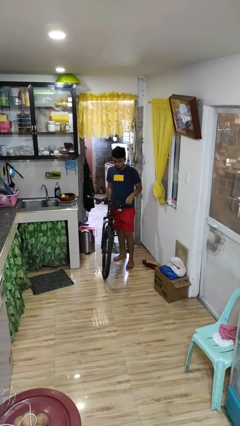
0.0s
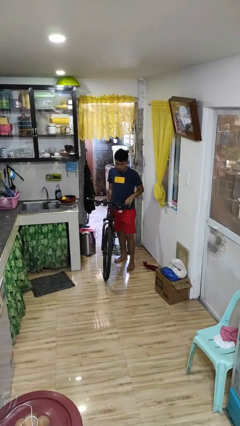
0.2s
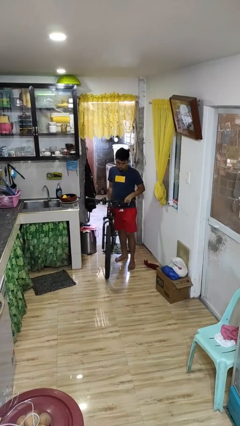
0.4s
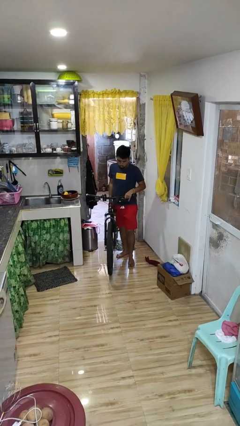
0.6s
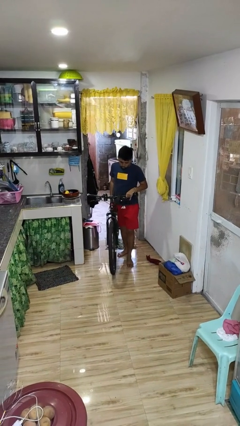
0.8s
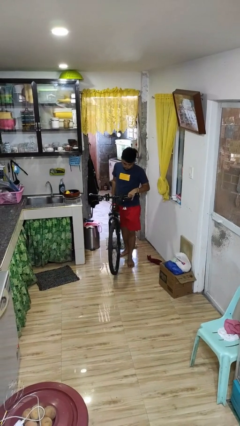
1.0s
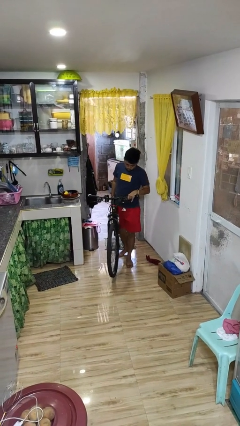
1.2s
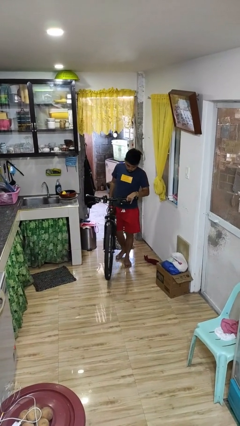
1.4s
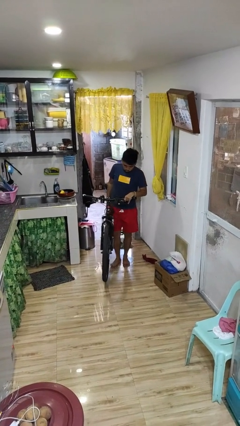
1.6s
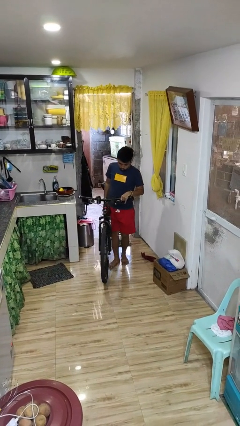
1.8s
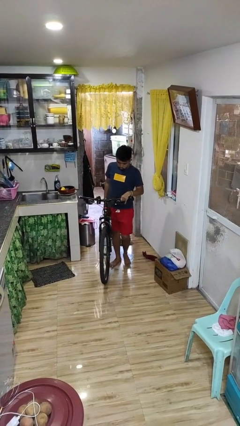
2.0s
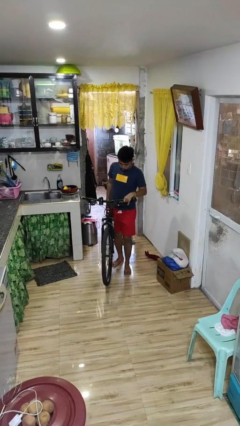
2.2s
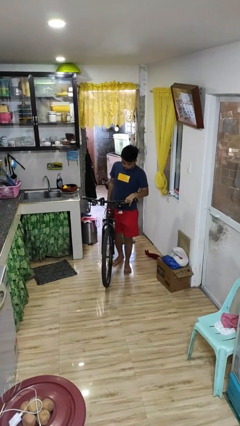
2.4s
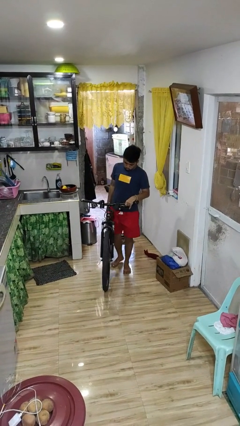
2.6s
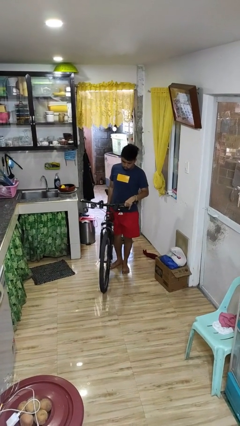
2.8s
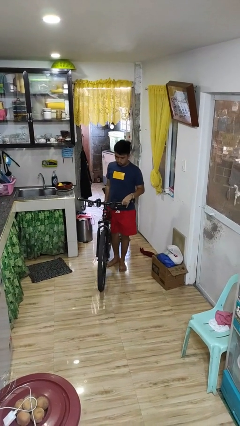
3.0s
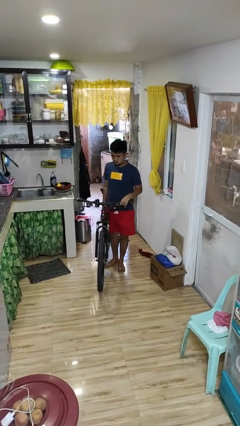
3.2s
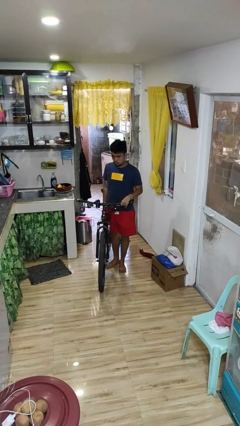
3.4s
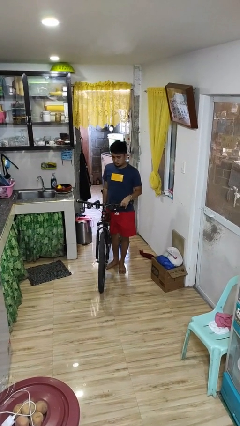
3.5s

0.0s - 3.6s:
person carries bicycle

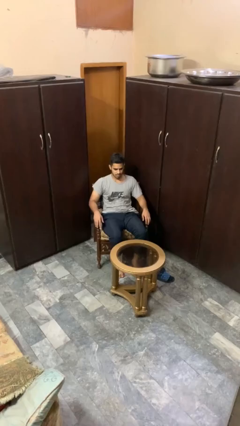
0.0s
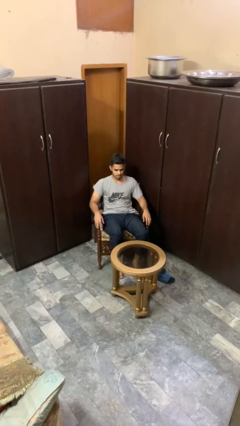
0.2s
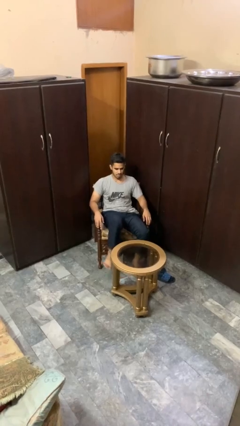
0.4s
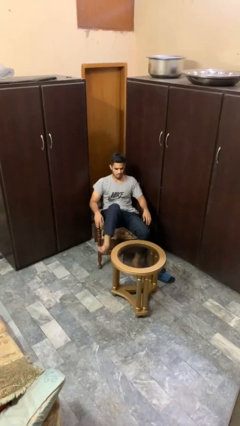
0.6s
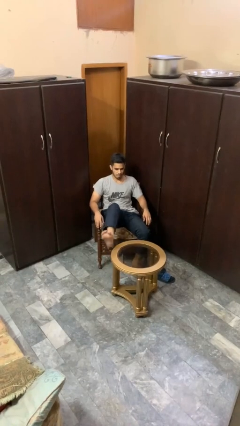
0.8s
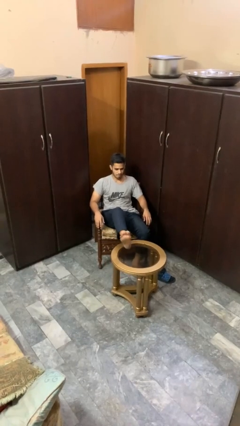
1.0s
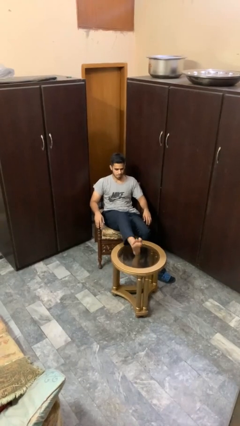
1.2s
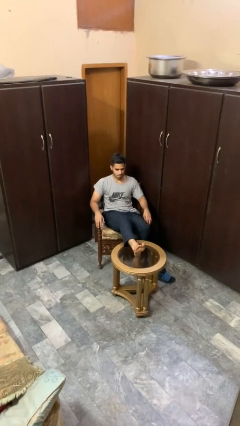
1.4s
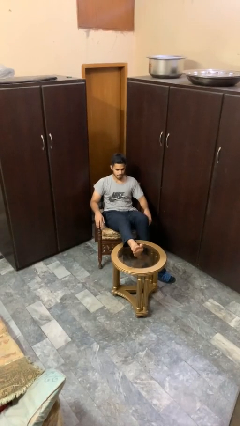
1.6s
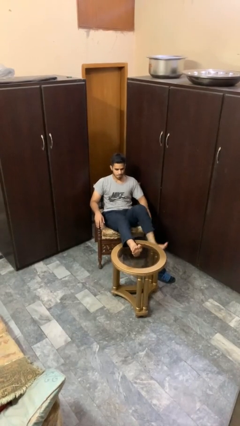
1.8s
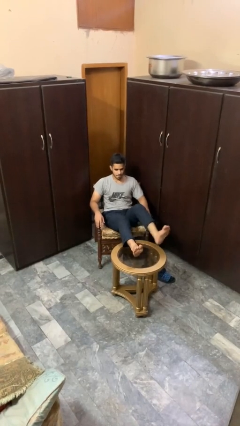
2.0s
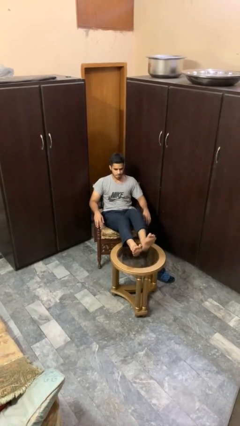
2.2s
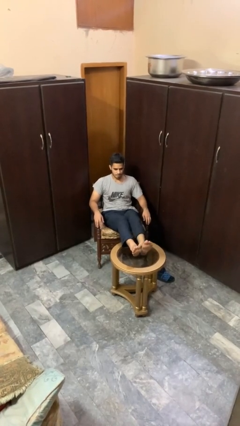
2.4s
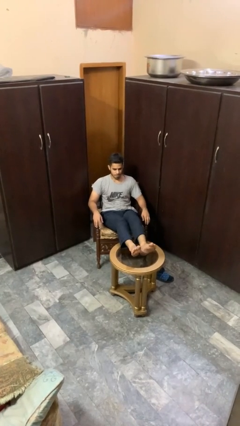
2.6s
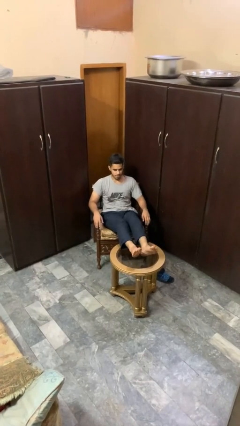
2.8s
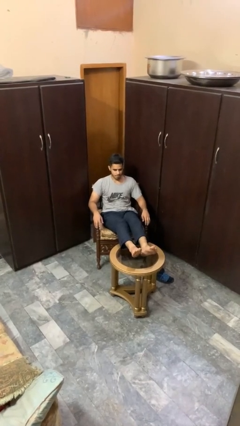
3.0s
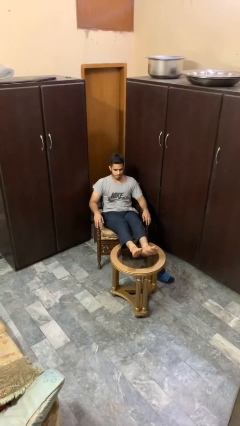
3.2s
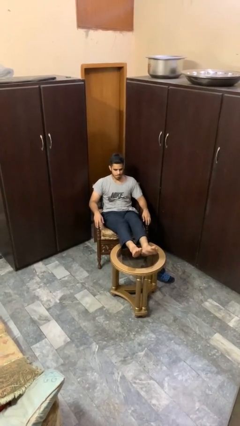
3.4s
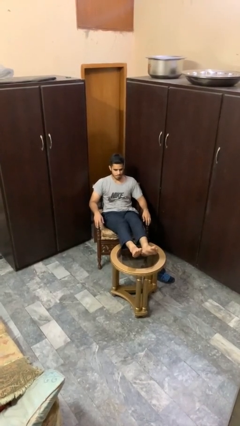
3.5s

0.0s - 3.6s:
person puts feet up

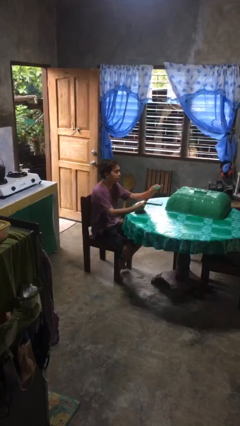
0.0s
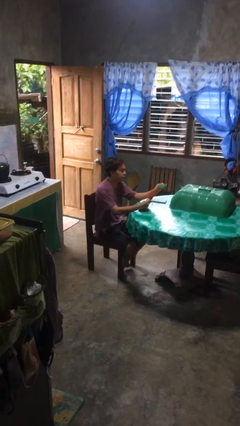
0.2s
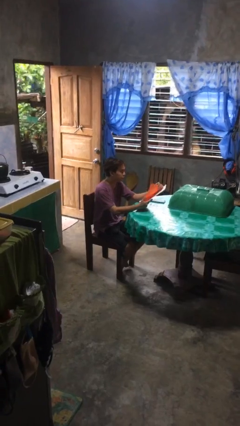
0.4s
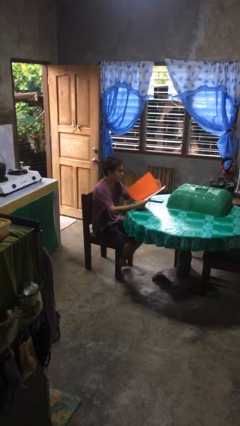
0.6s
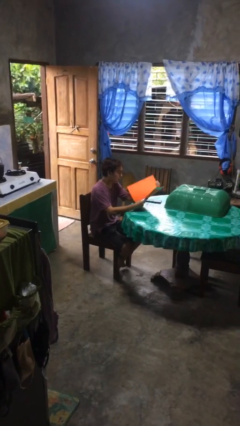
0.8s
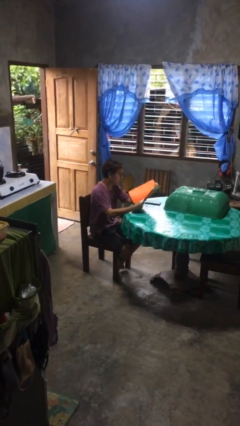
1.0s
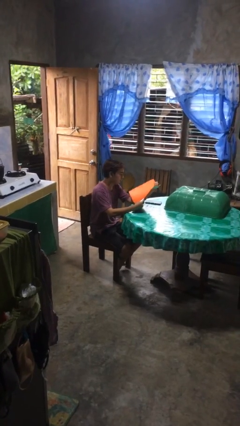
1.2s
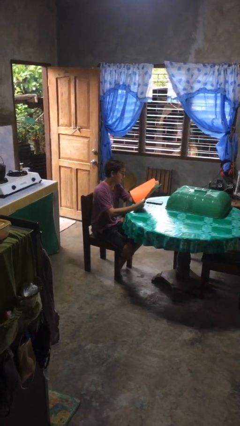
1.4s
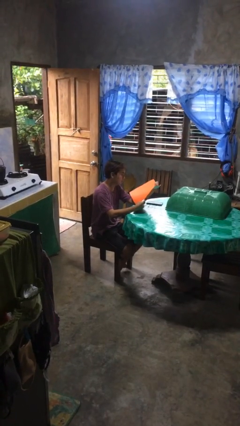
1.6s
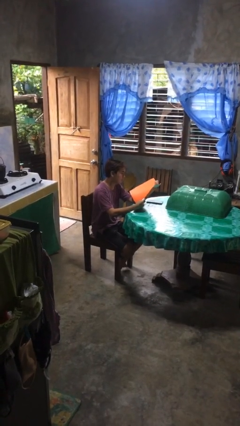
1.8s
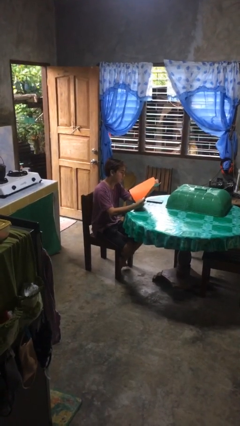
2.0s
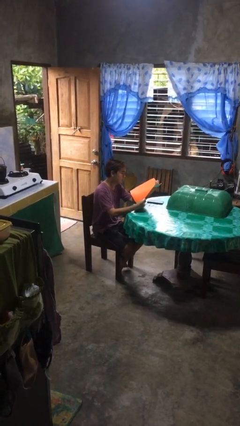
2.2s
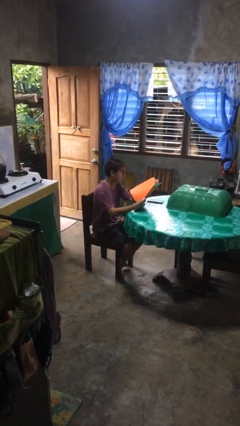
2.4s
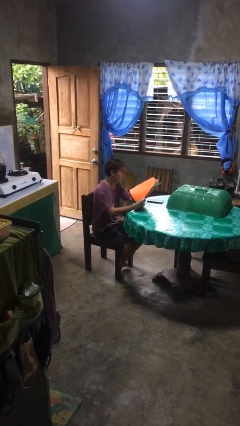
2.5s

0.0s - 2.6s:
person reads document

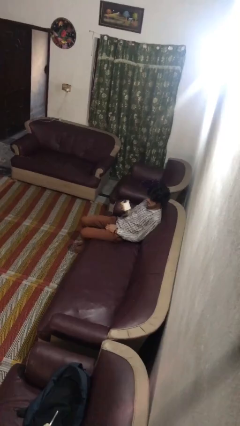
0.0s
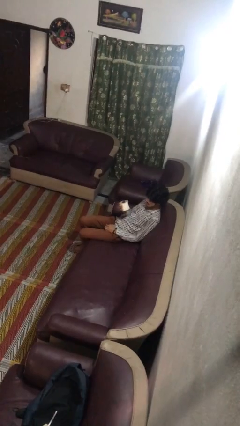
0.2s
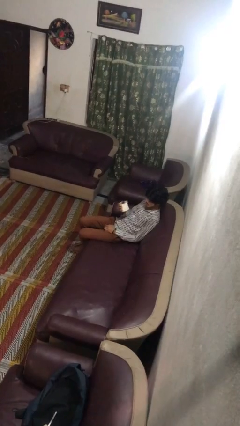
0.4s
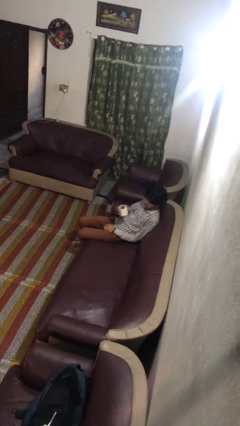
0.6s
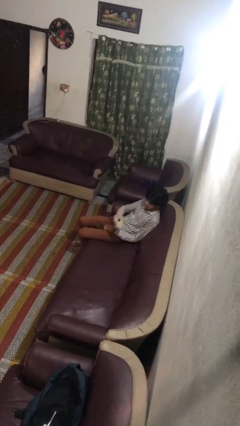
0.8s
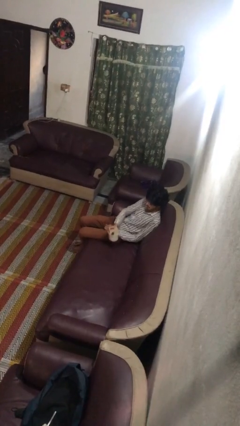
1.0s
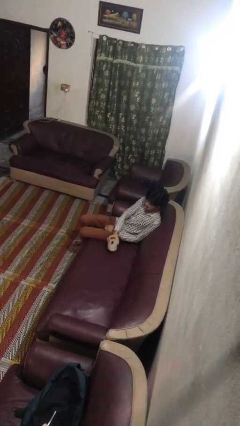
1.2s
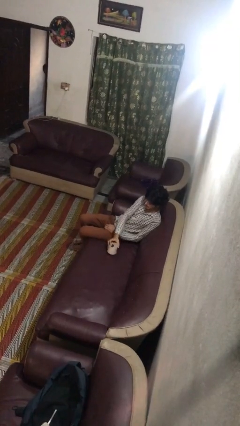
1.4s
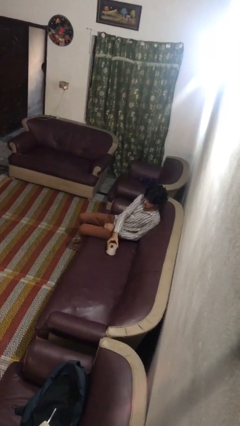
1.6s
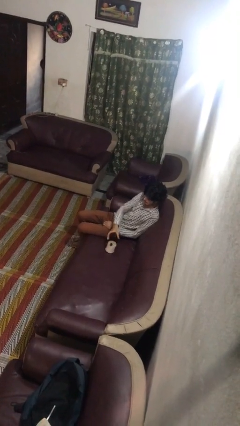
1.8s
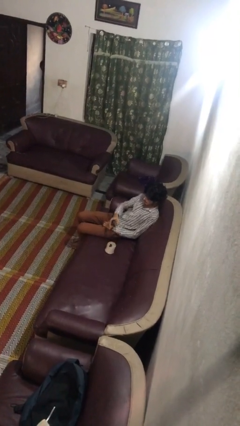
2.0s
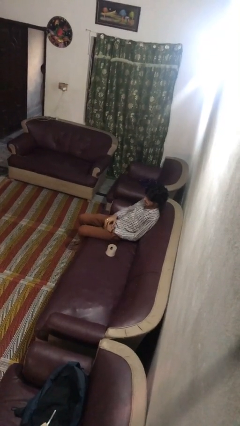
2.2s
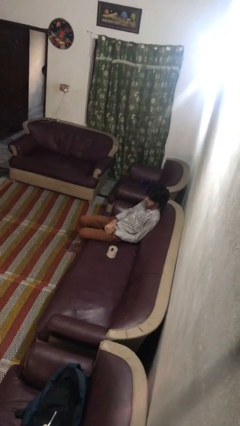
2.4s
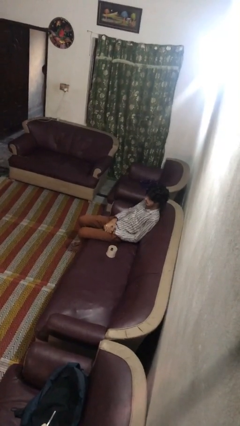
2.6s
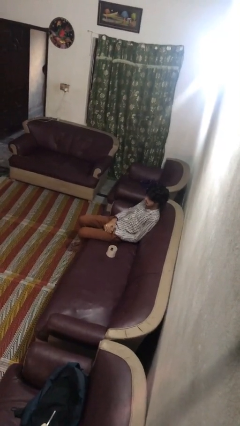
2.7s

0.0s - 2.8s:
person puts down object on couch

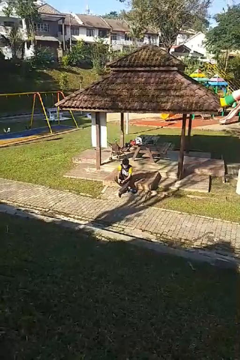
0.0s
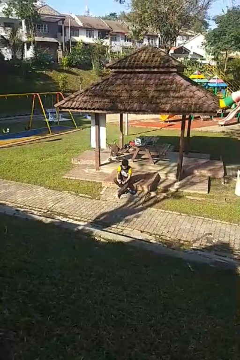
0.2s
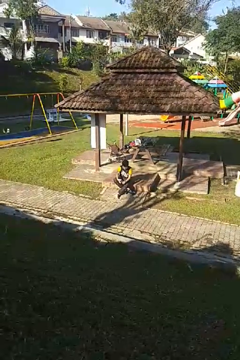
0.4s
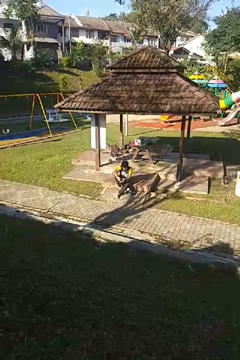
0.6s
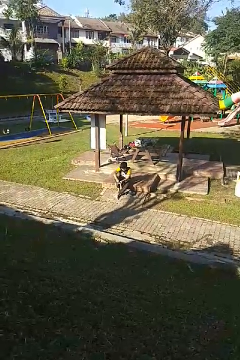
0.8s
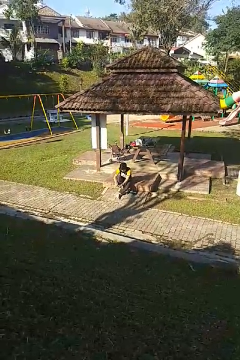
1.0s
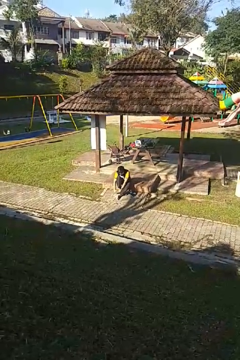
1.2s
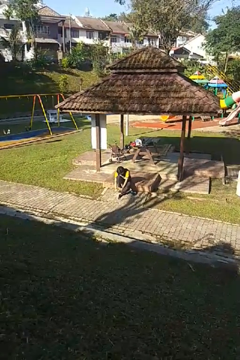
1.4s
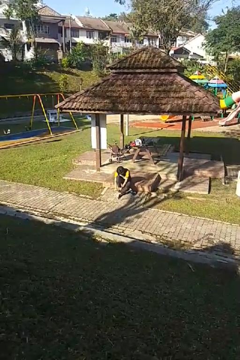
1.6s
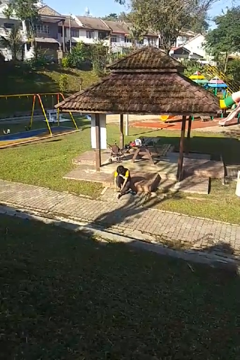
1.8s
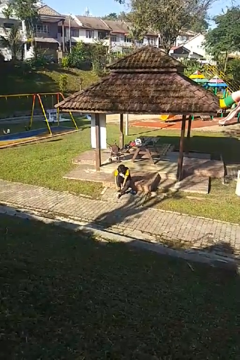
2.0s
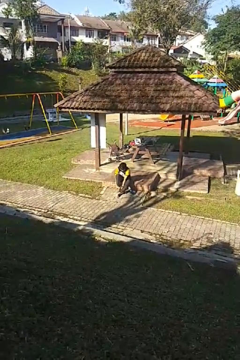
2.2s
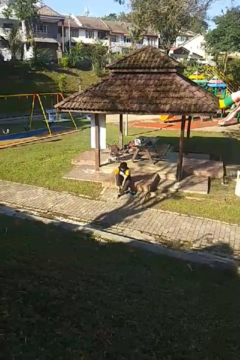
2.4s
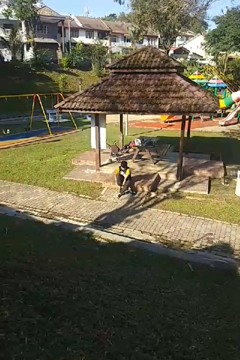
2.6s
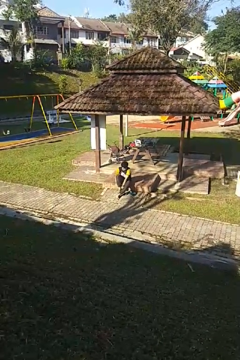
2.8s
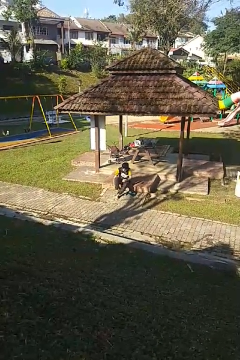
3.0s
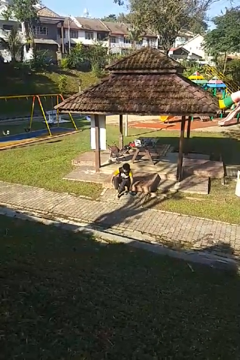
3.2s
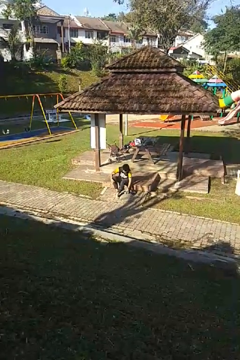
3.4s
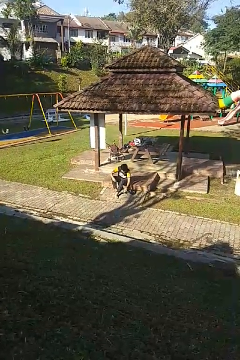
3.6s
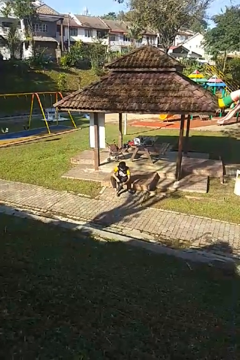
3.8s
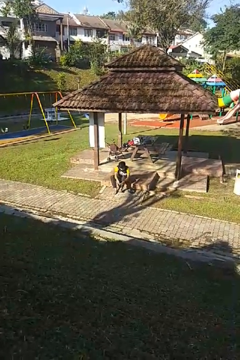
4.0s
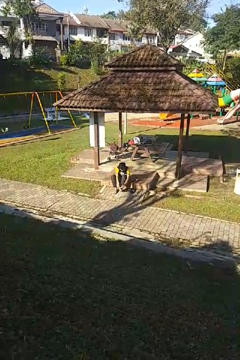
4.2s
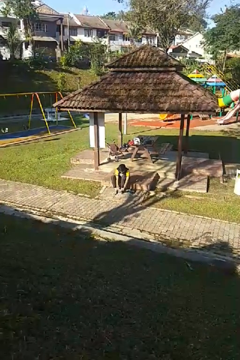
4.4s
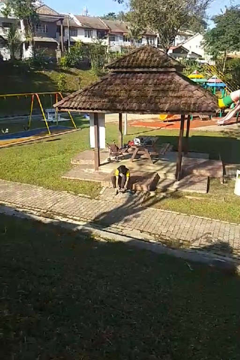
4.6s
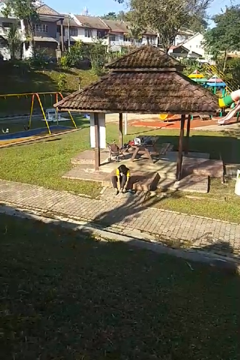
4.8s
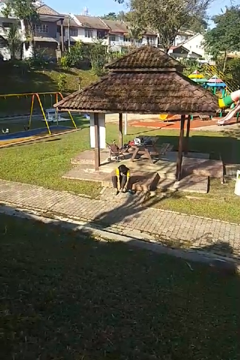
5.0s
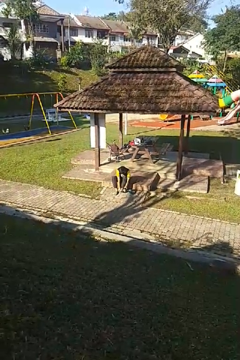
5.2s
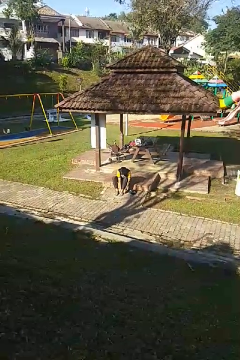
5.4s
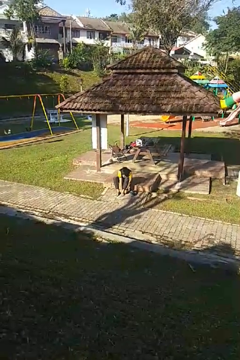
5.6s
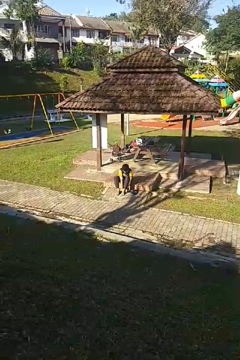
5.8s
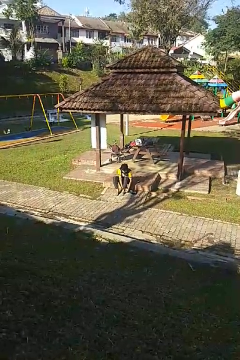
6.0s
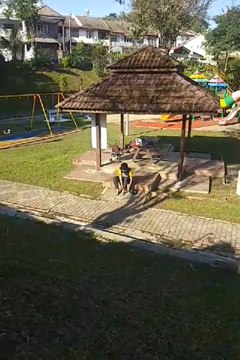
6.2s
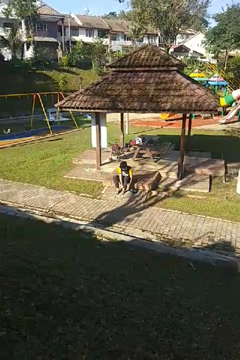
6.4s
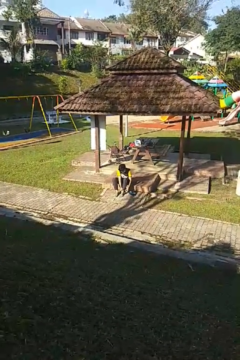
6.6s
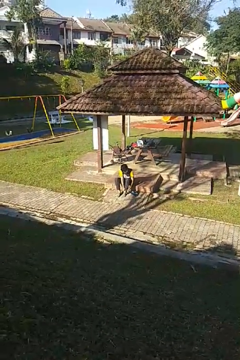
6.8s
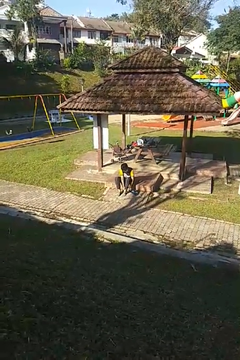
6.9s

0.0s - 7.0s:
person puts on socks
